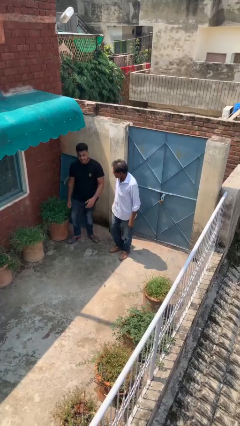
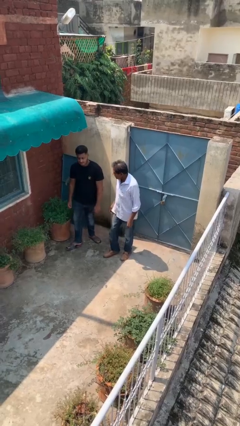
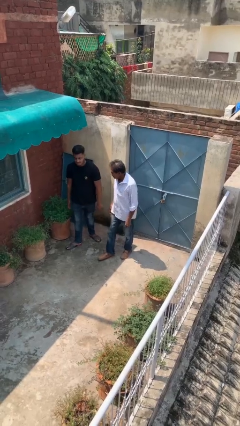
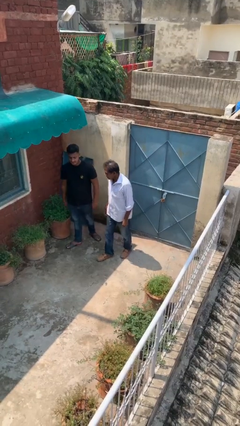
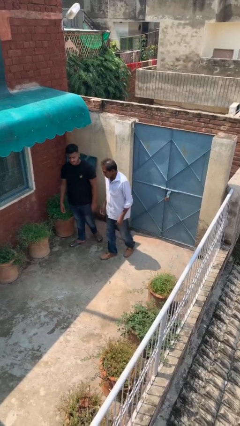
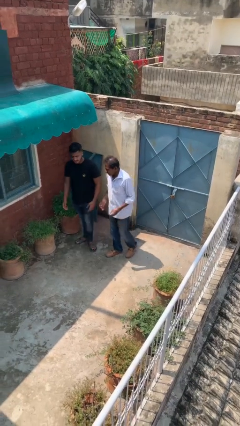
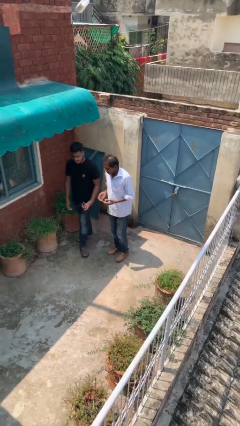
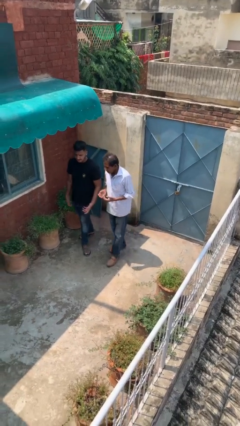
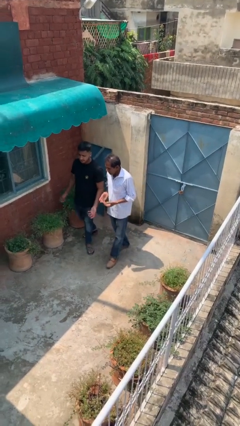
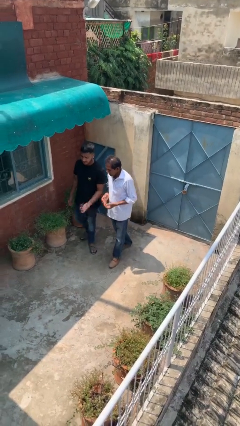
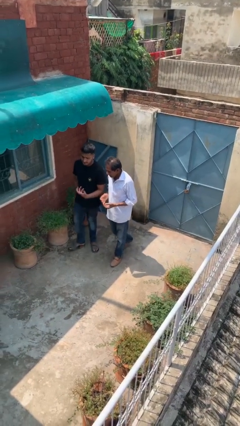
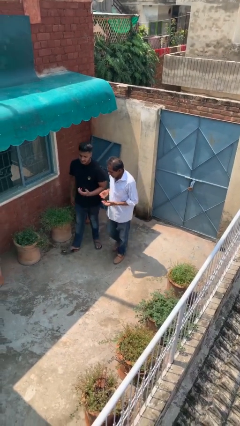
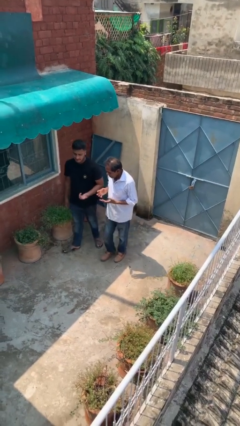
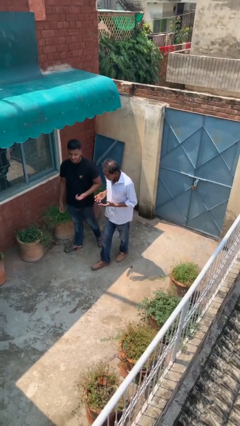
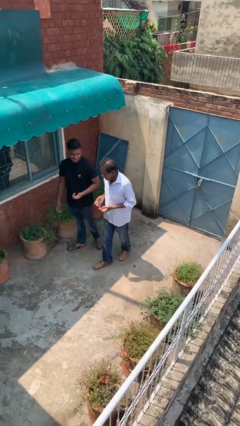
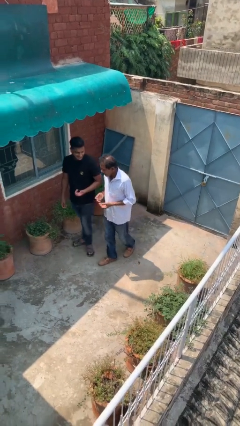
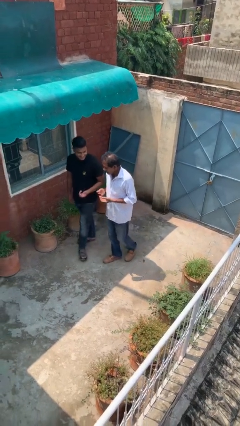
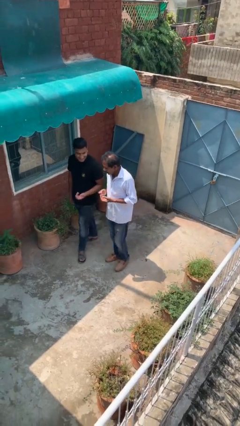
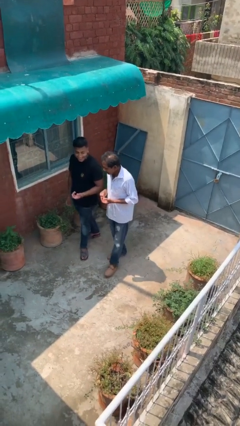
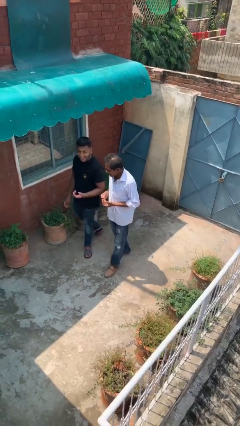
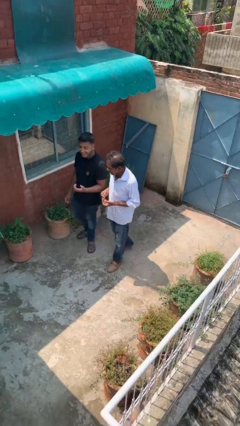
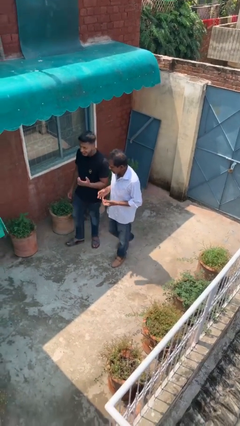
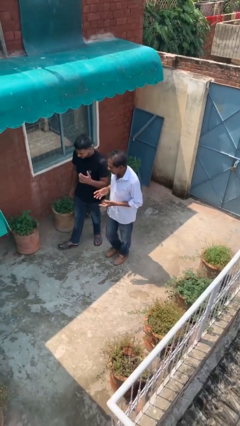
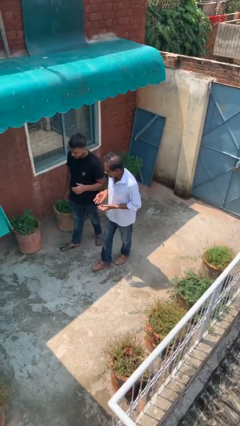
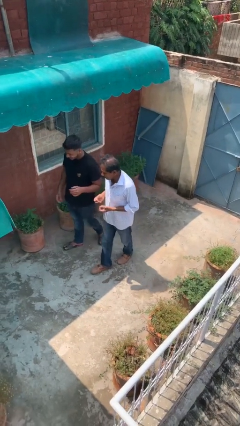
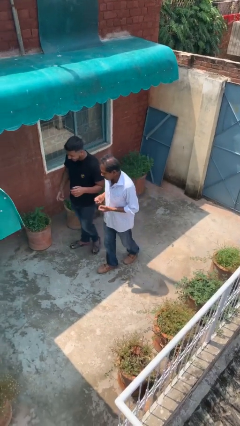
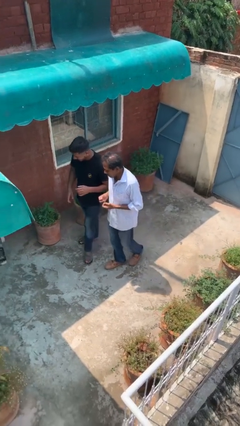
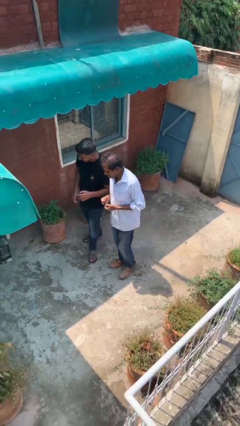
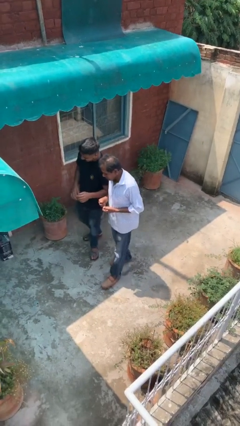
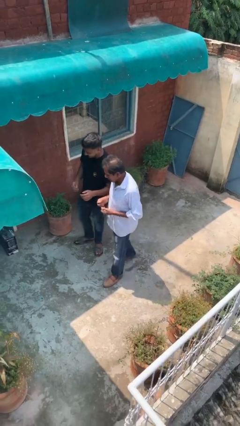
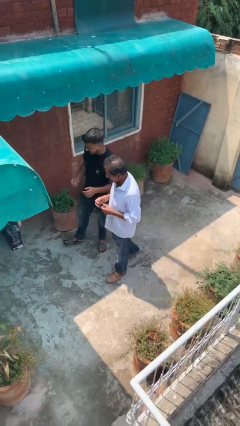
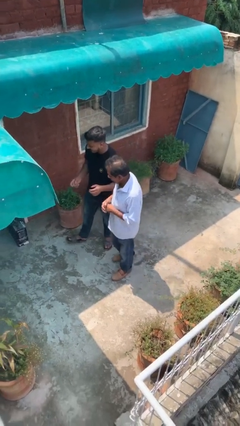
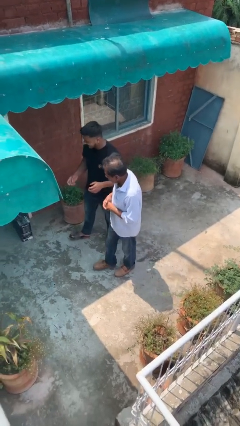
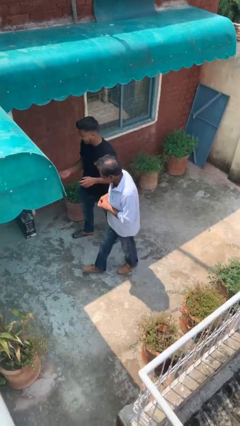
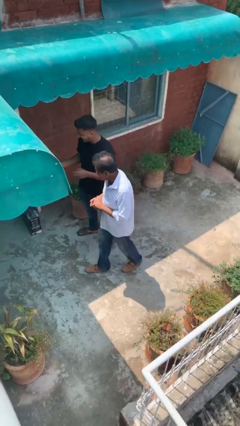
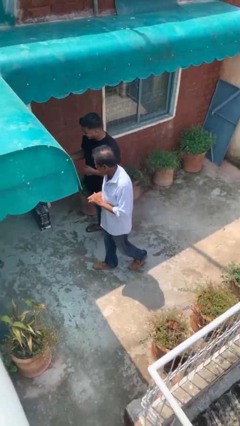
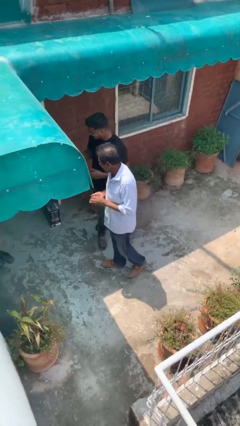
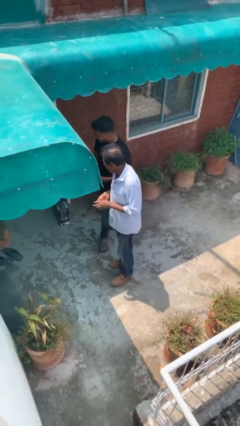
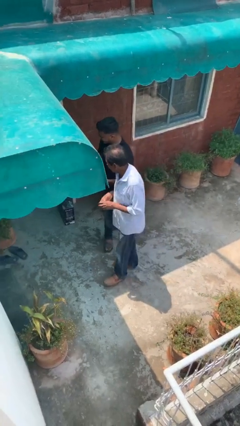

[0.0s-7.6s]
person talks to person

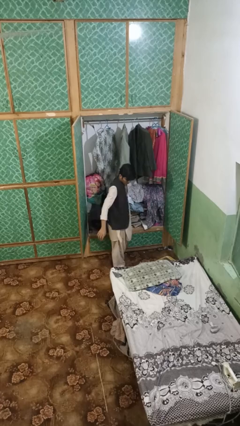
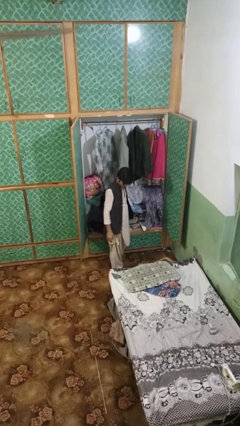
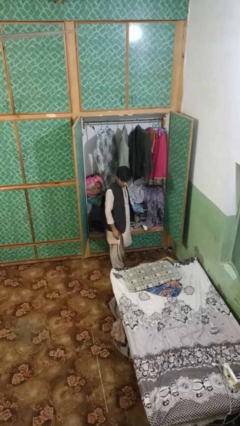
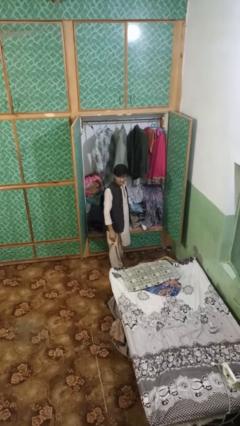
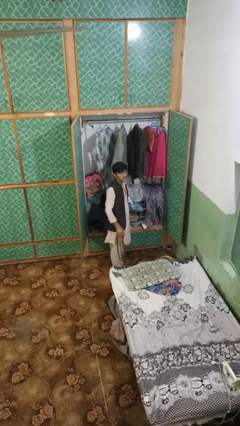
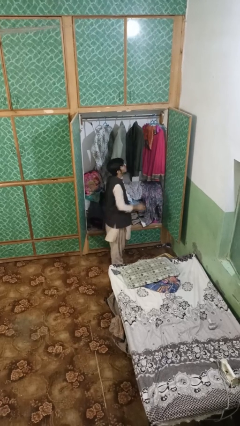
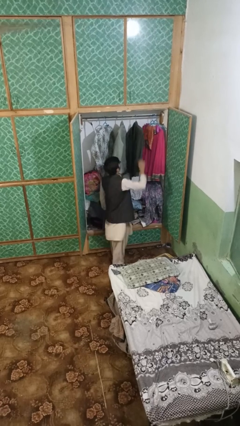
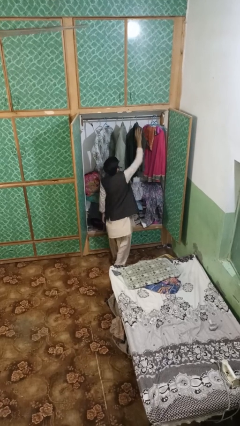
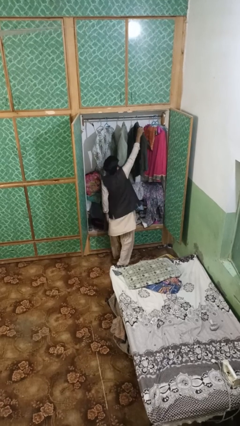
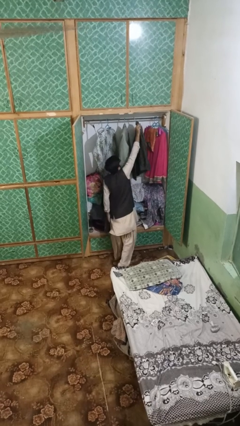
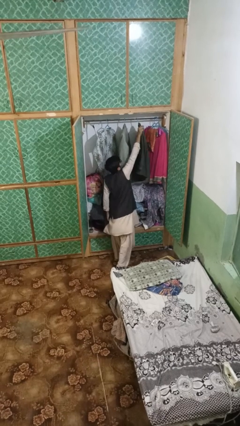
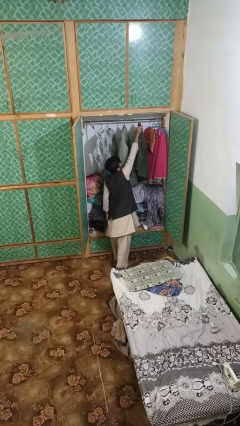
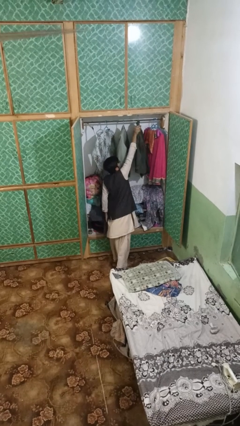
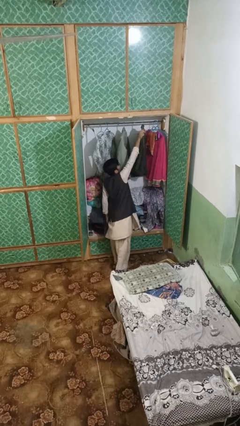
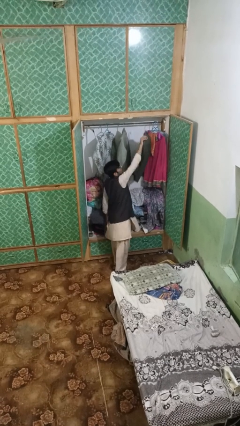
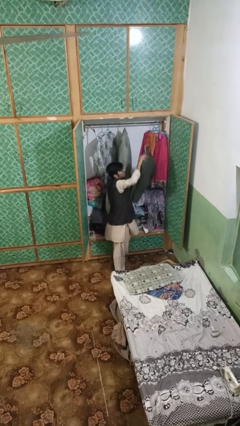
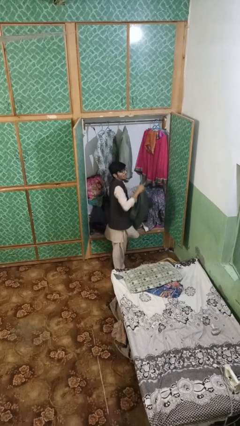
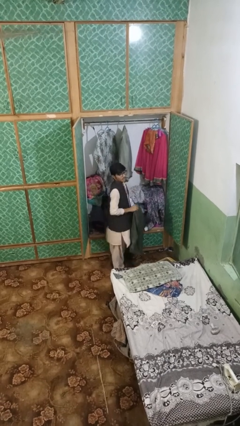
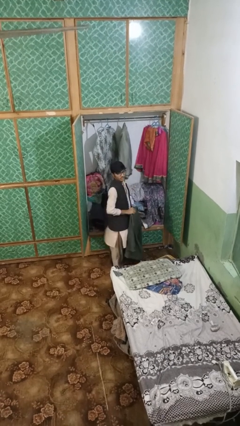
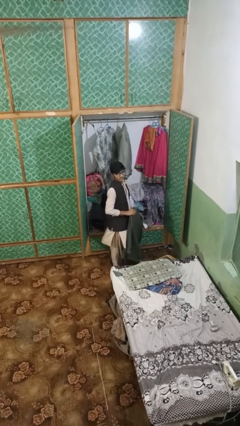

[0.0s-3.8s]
person takes clothes from closet

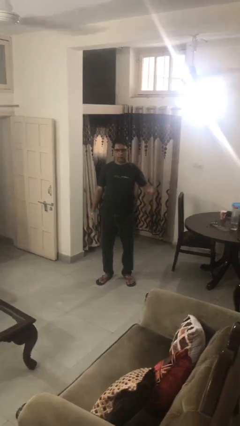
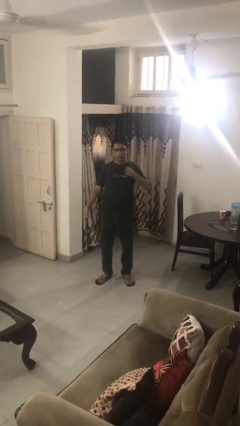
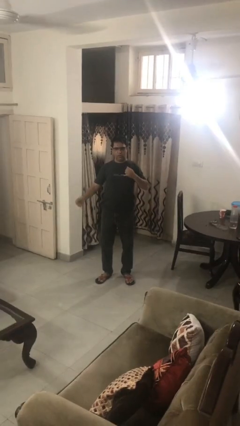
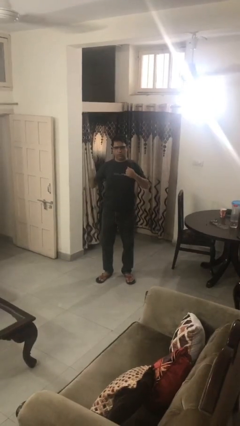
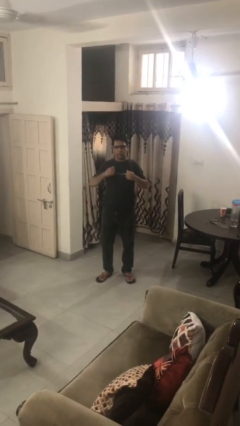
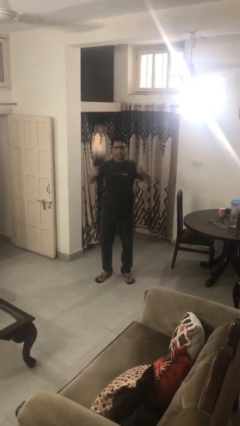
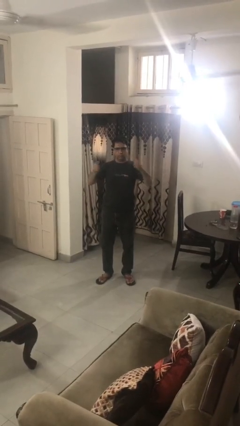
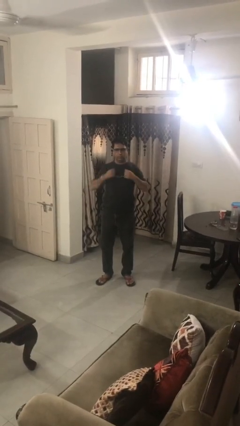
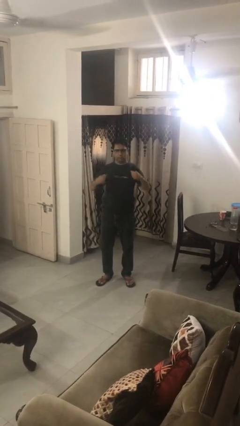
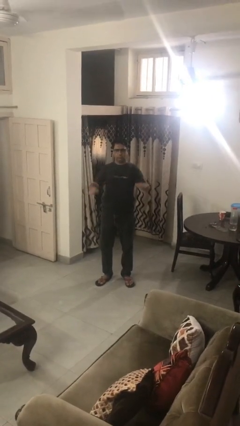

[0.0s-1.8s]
person drums on chest

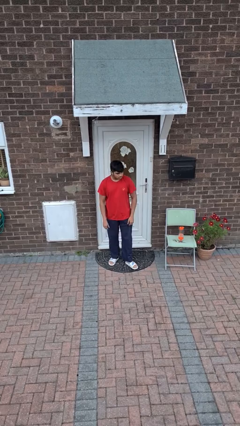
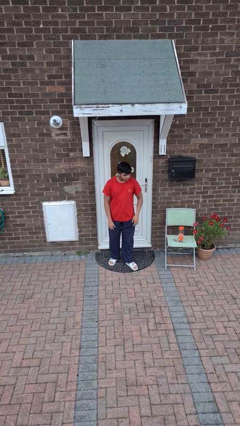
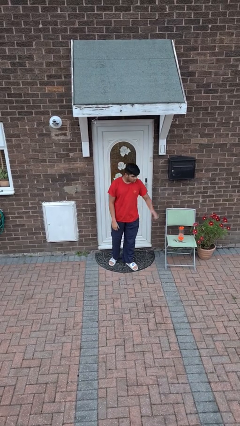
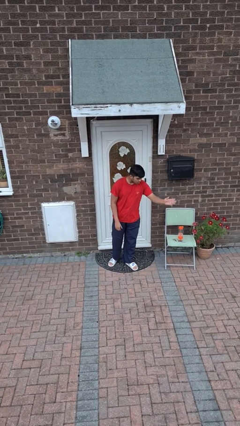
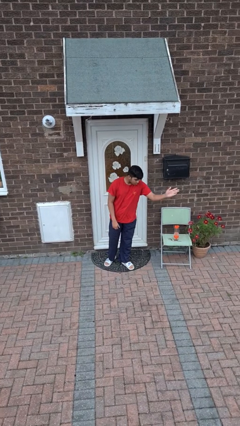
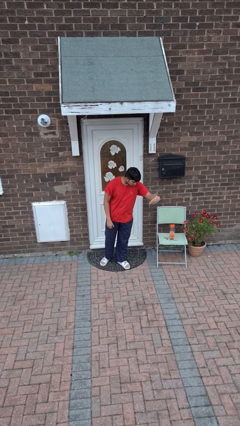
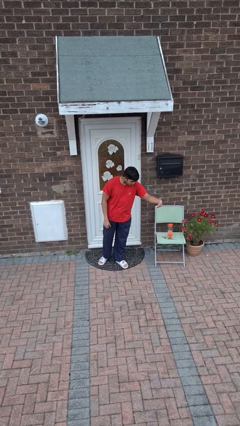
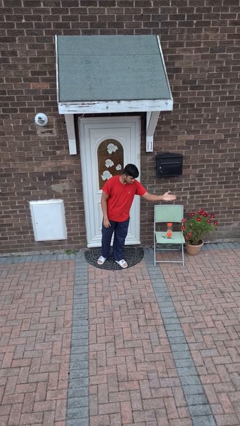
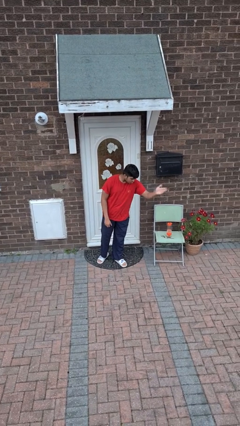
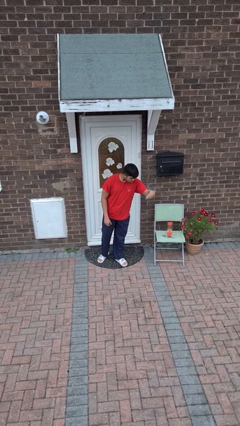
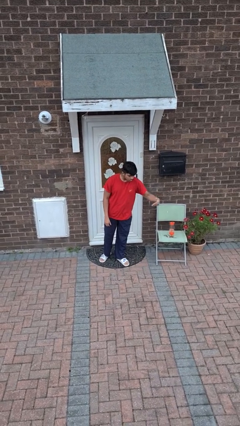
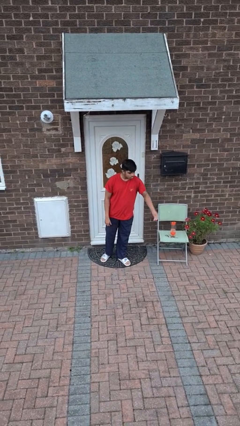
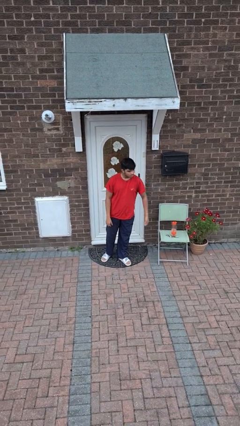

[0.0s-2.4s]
person gestures come here

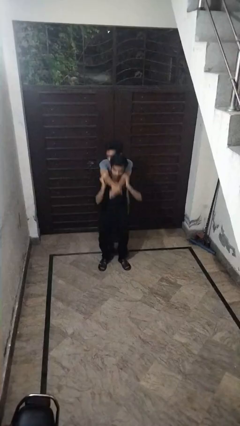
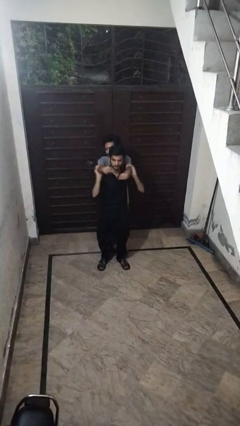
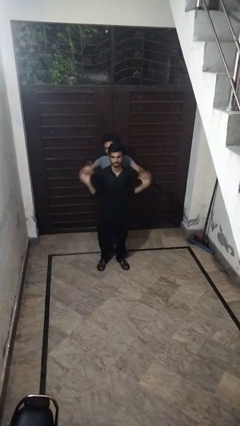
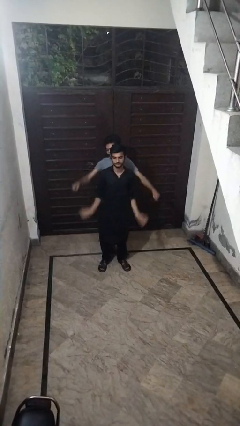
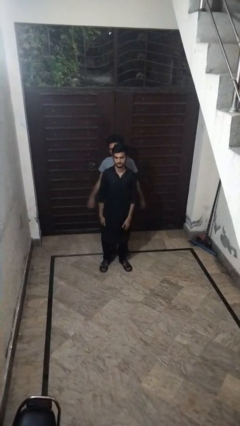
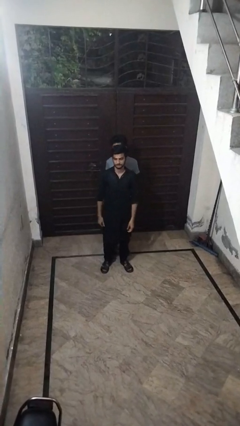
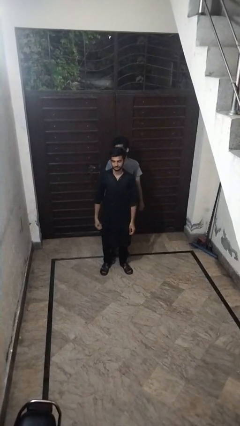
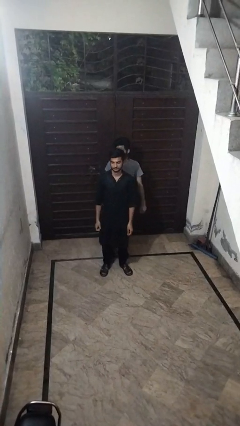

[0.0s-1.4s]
person puts down person

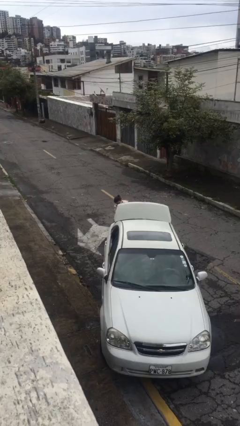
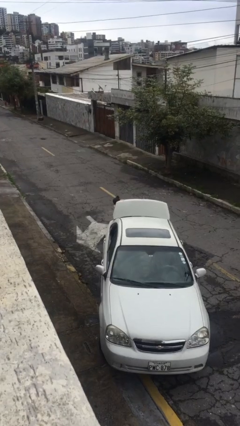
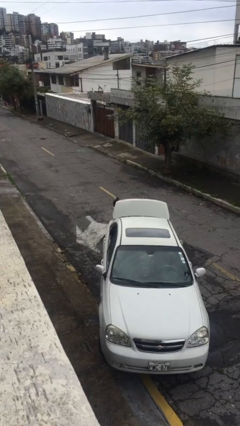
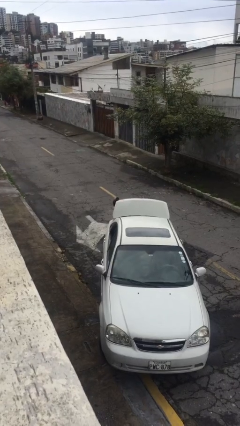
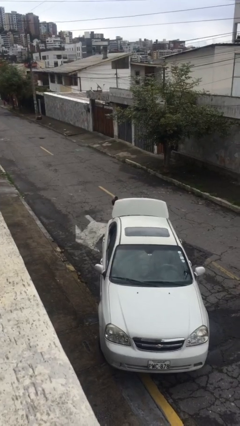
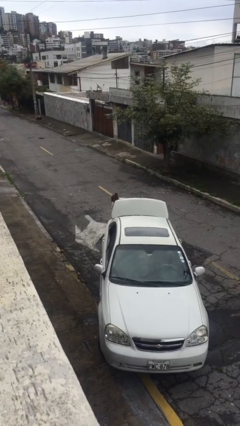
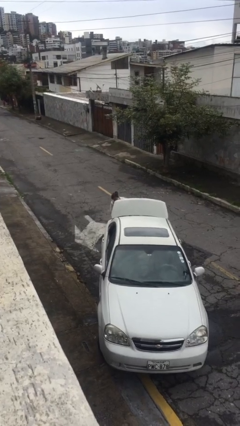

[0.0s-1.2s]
person loads car
